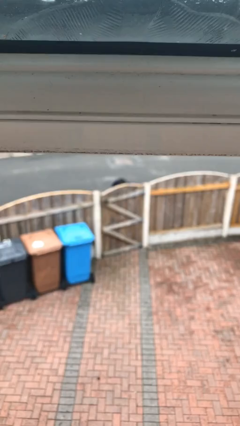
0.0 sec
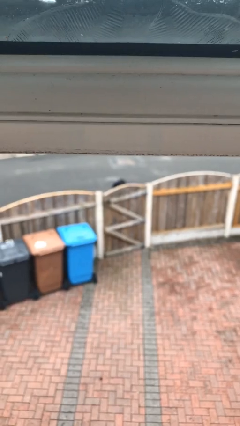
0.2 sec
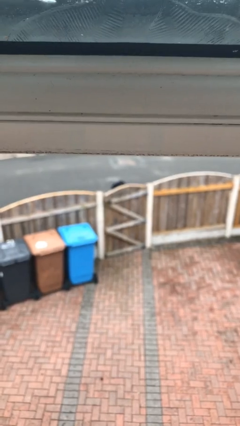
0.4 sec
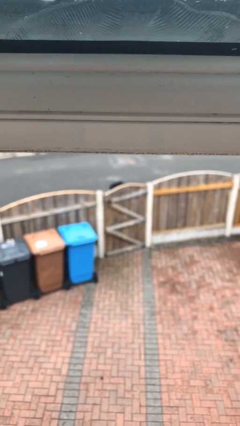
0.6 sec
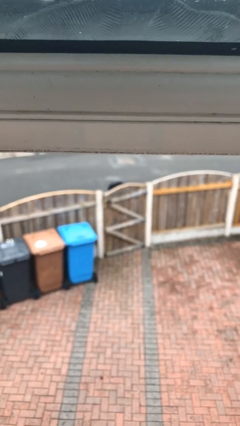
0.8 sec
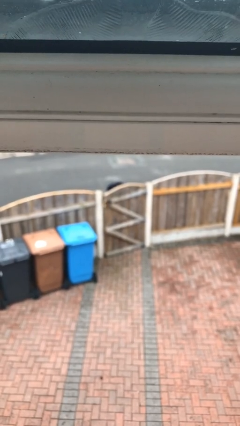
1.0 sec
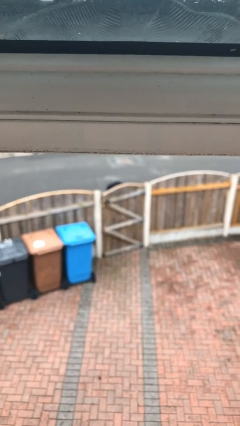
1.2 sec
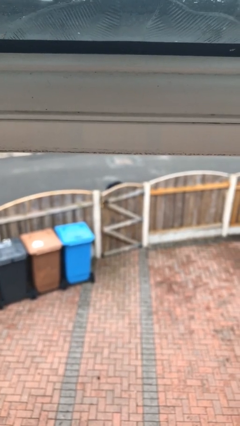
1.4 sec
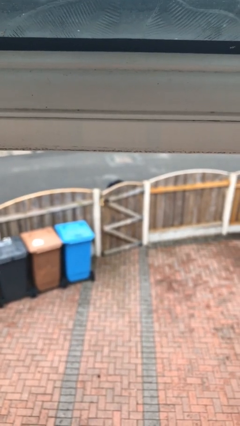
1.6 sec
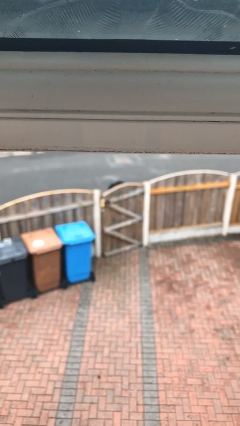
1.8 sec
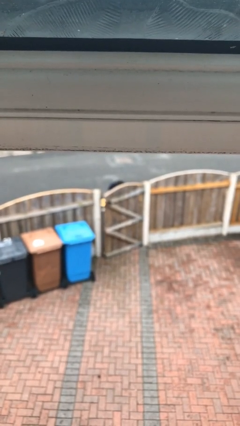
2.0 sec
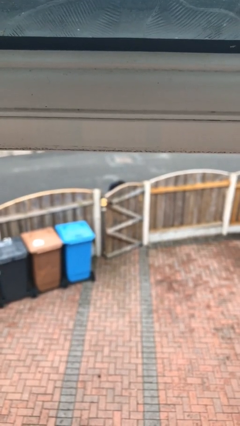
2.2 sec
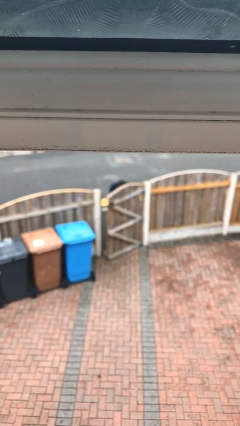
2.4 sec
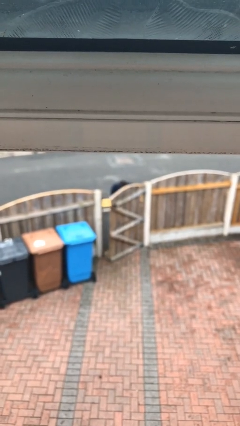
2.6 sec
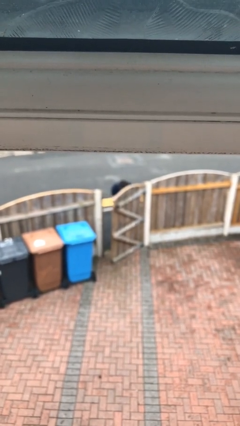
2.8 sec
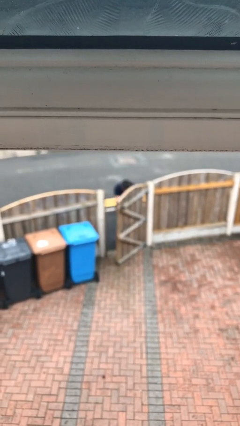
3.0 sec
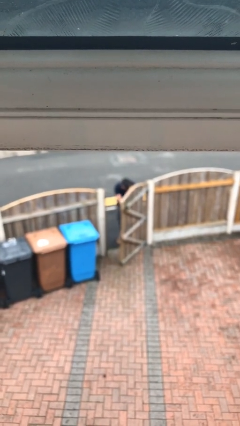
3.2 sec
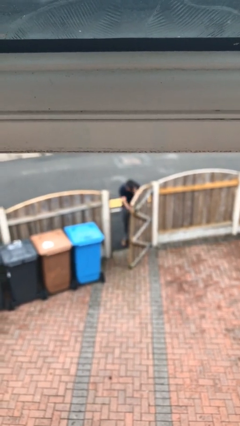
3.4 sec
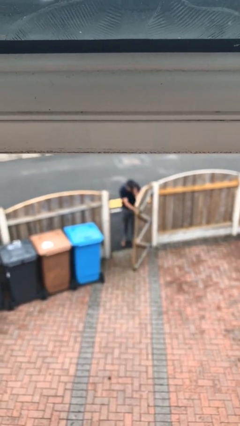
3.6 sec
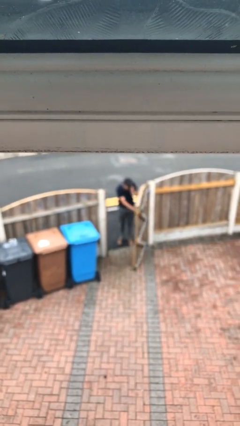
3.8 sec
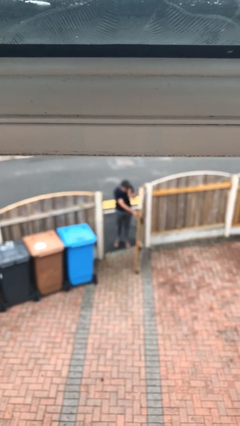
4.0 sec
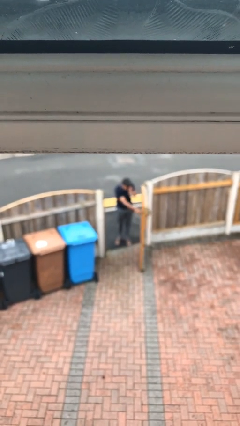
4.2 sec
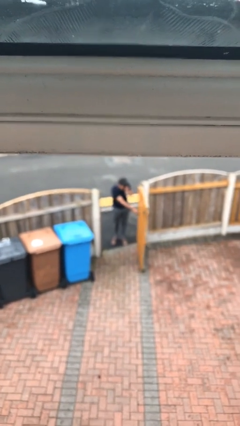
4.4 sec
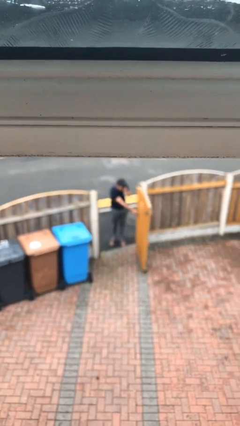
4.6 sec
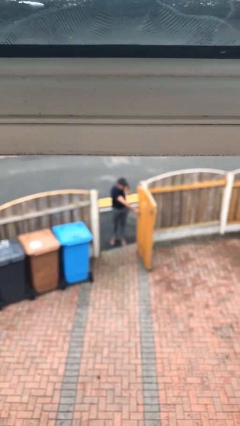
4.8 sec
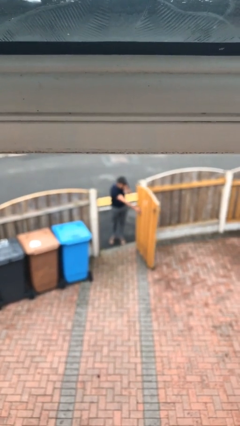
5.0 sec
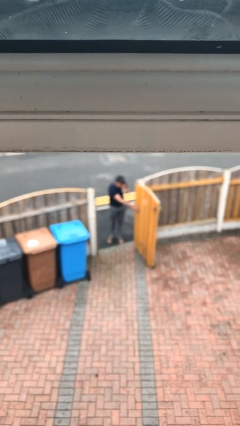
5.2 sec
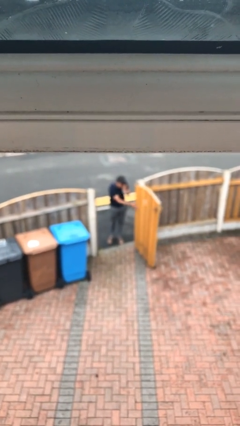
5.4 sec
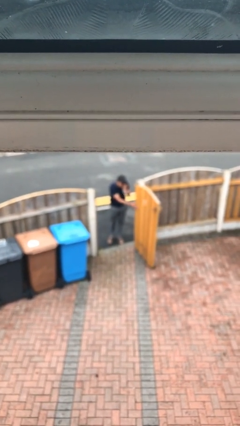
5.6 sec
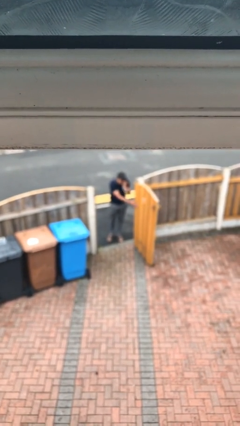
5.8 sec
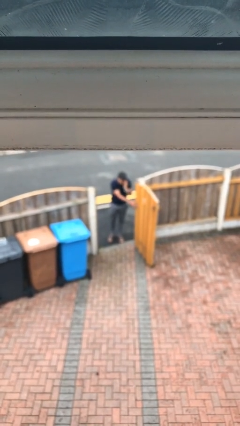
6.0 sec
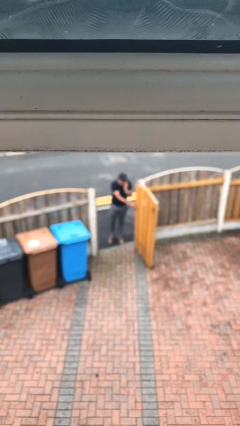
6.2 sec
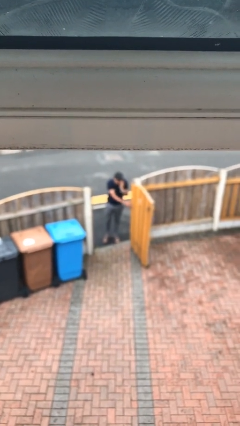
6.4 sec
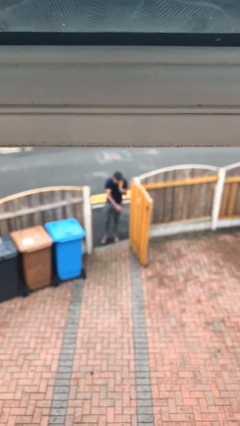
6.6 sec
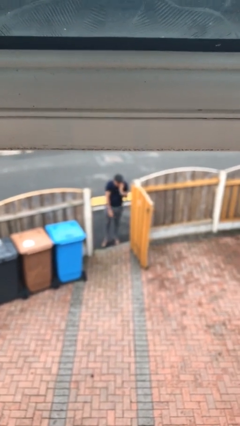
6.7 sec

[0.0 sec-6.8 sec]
person opens facility door

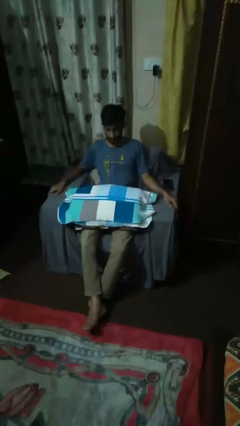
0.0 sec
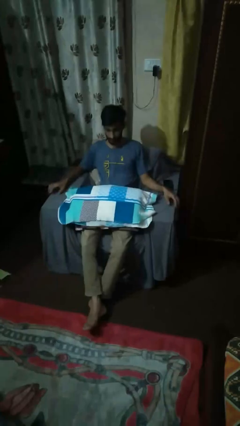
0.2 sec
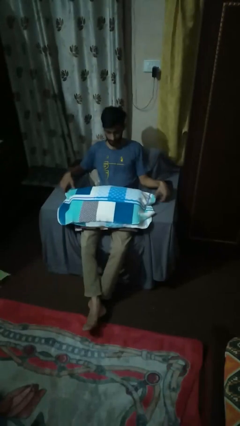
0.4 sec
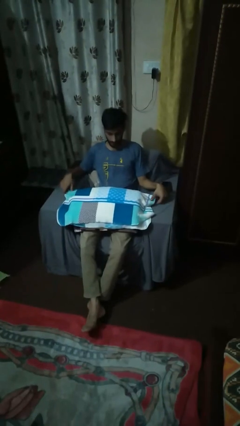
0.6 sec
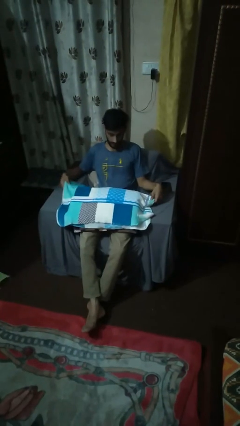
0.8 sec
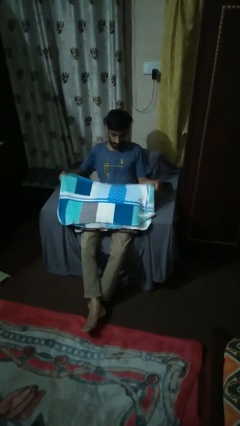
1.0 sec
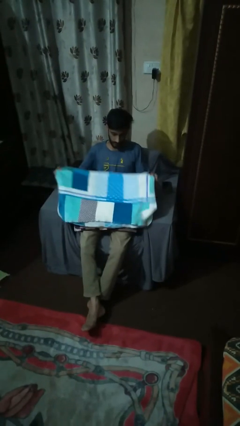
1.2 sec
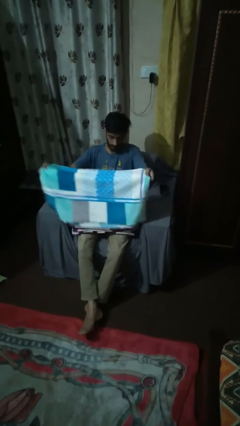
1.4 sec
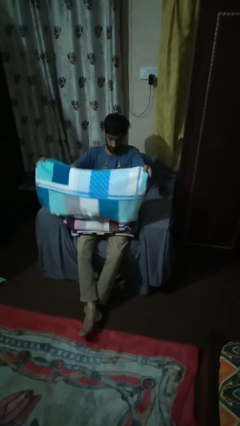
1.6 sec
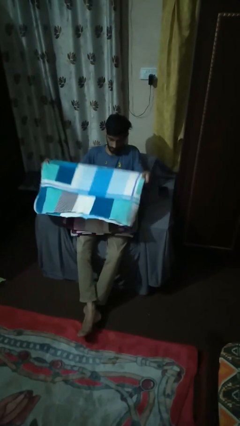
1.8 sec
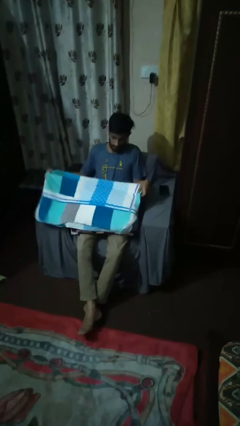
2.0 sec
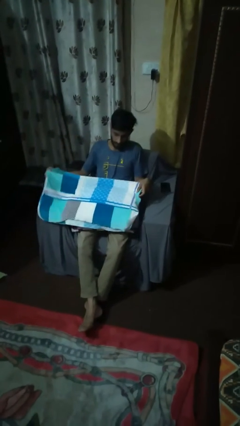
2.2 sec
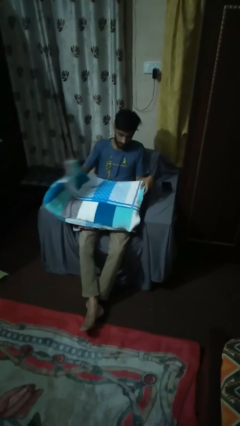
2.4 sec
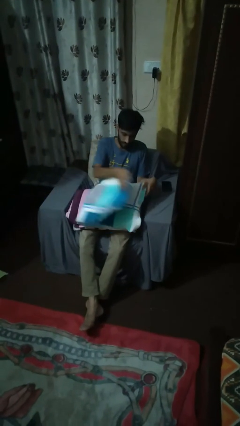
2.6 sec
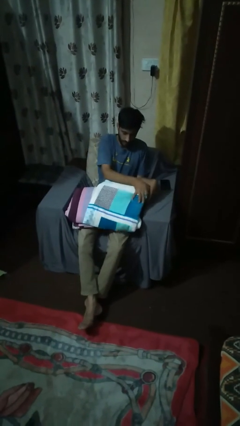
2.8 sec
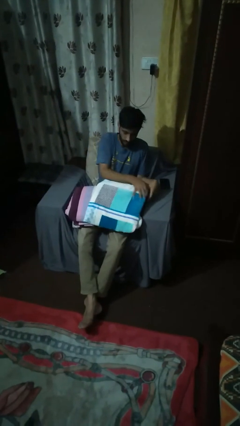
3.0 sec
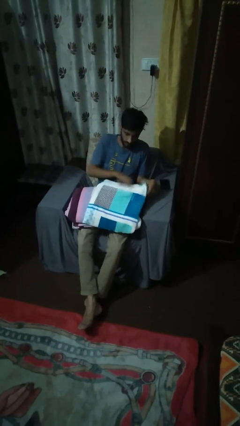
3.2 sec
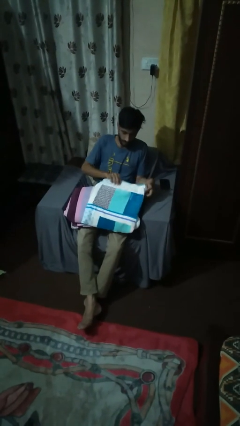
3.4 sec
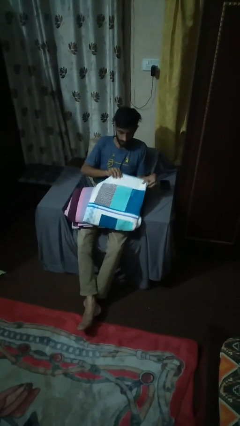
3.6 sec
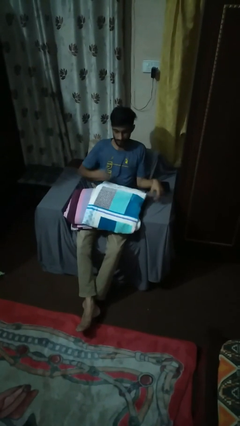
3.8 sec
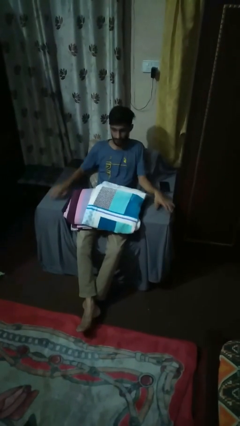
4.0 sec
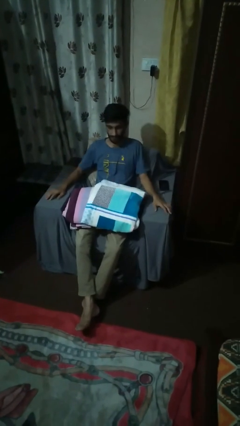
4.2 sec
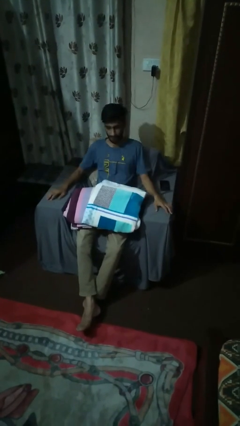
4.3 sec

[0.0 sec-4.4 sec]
person folds blanket

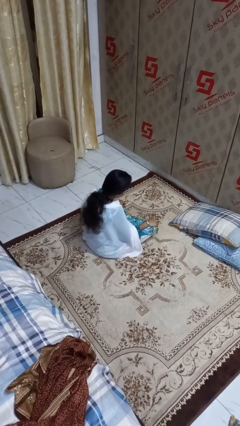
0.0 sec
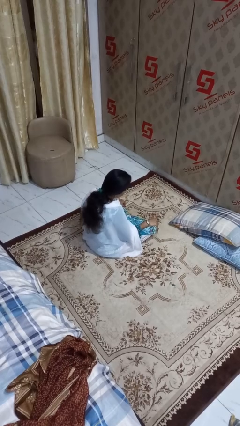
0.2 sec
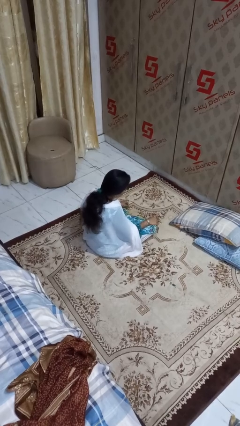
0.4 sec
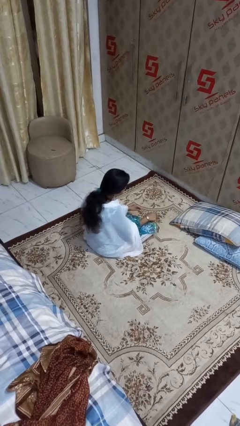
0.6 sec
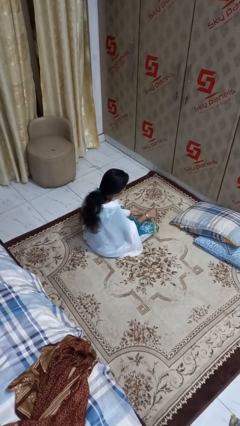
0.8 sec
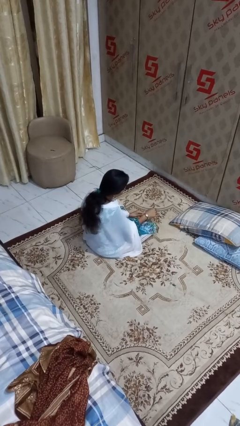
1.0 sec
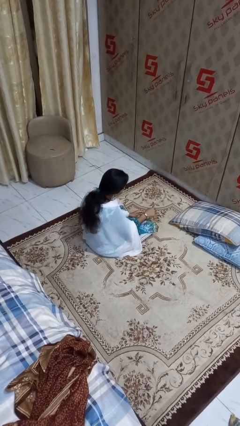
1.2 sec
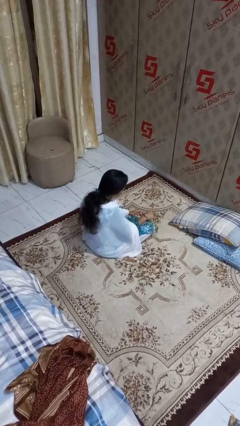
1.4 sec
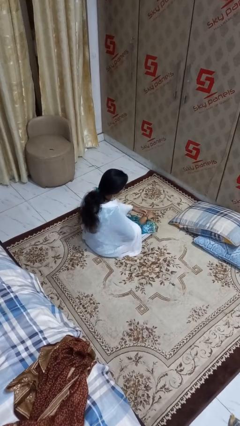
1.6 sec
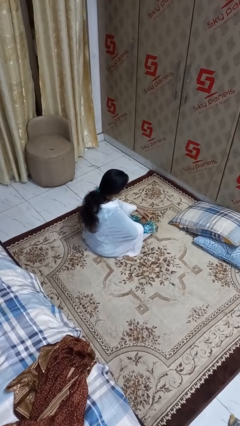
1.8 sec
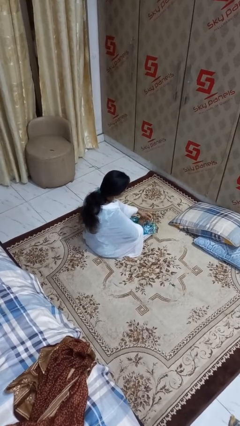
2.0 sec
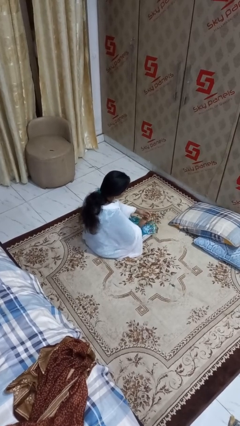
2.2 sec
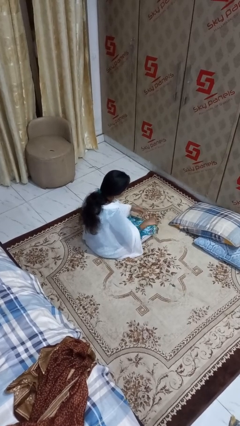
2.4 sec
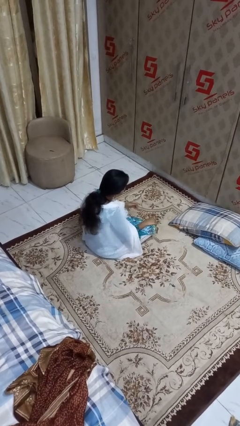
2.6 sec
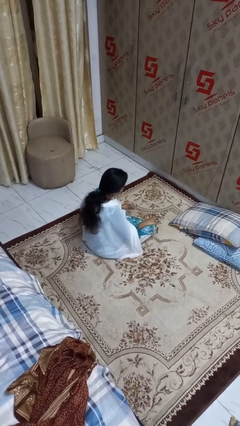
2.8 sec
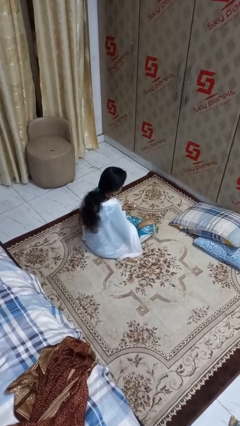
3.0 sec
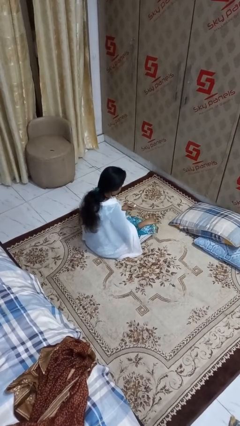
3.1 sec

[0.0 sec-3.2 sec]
person takes off wristwatch

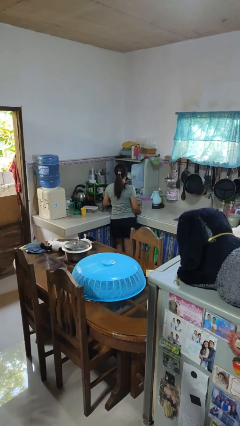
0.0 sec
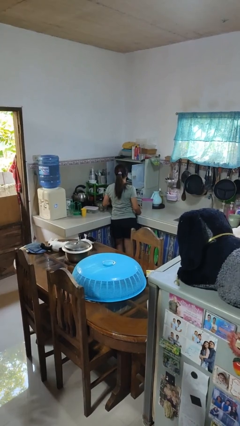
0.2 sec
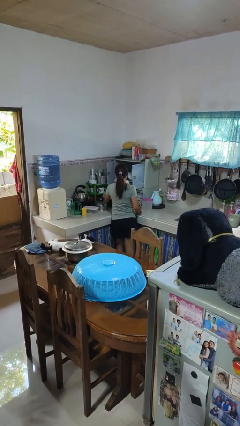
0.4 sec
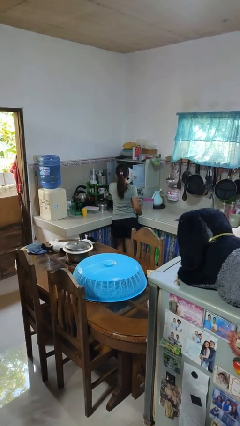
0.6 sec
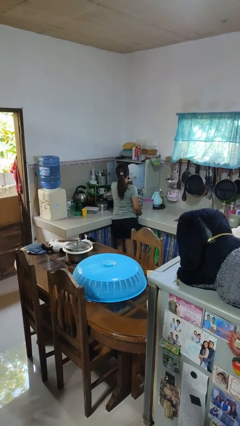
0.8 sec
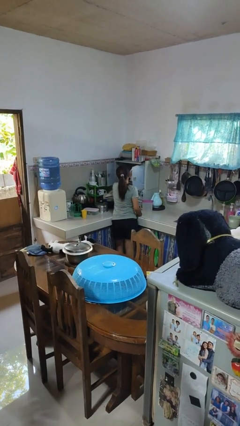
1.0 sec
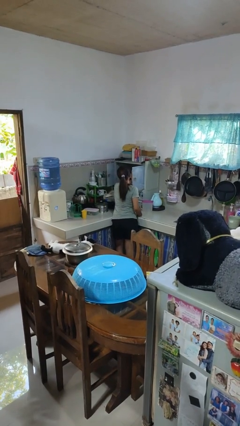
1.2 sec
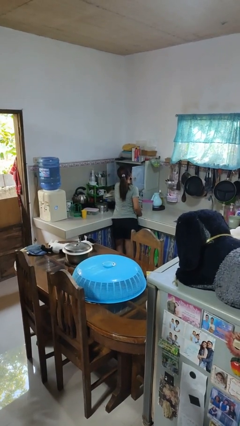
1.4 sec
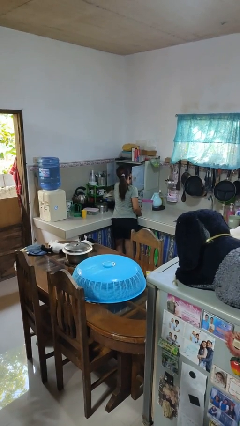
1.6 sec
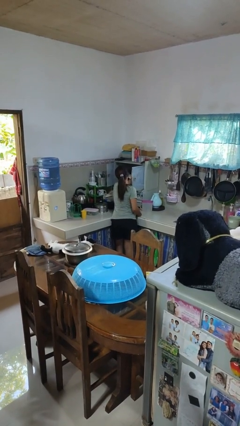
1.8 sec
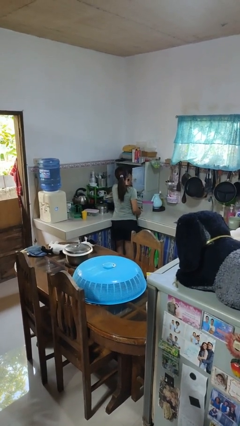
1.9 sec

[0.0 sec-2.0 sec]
person puts object into kitchen drawer

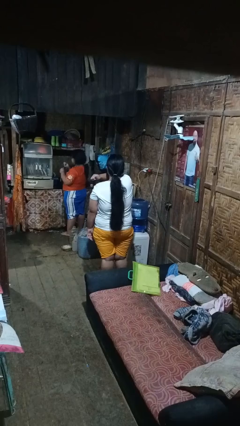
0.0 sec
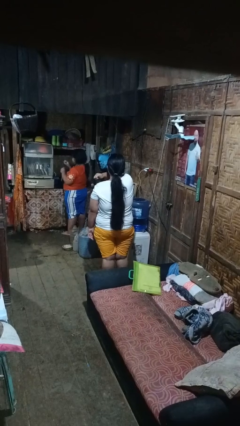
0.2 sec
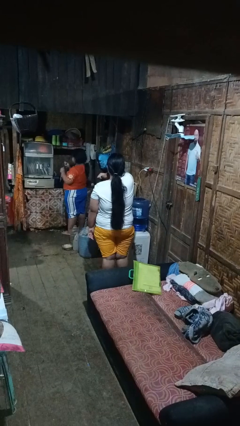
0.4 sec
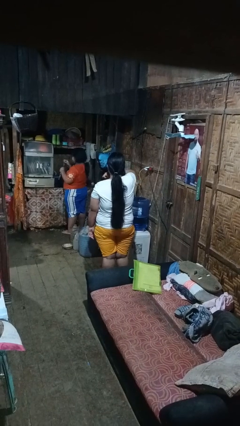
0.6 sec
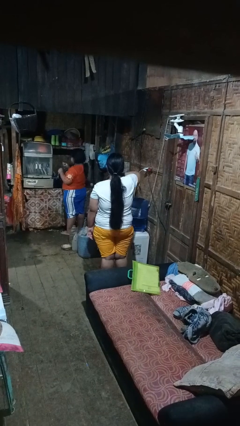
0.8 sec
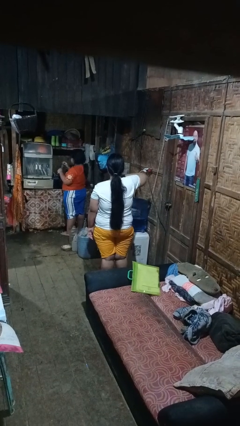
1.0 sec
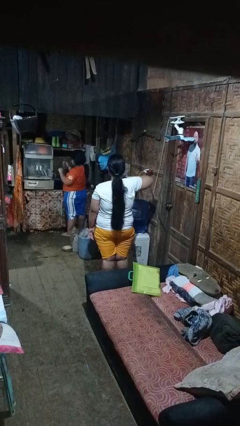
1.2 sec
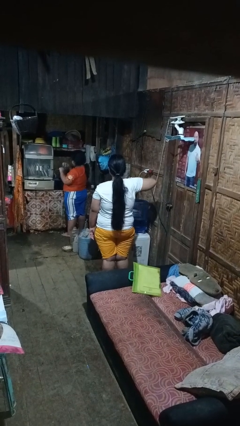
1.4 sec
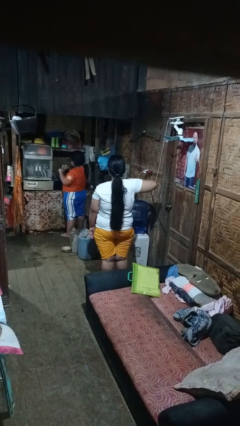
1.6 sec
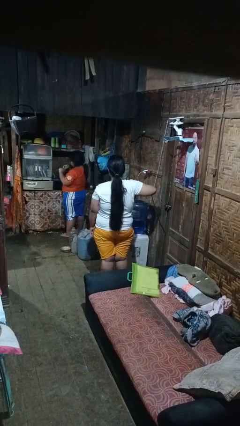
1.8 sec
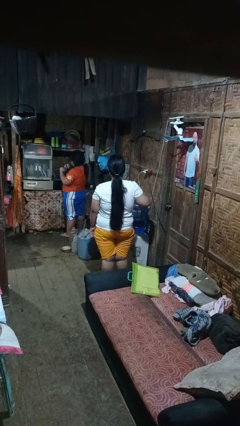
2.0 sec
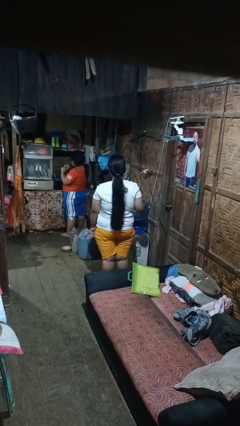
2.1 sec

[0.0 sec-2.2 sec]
person gestures cut
